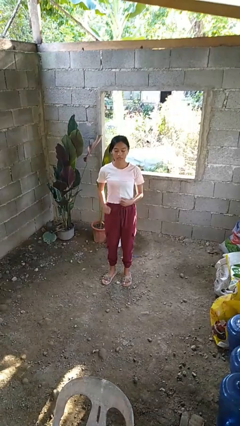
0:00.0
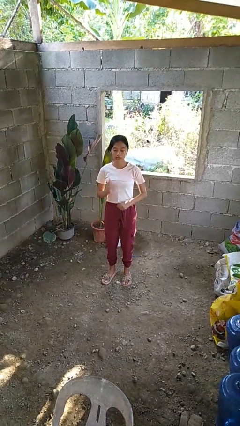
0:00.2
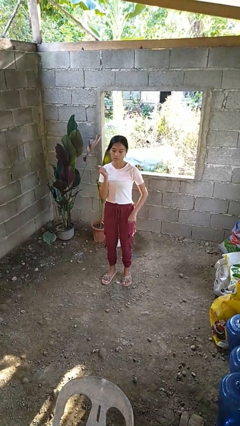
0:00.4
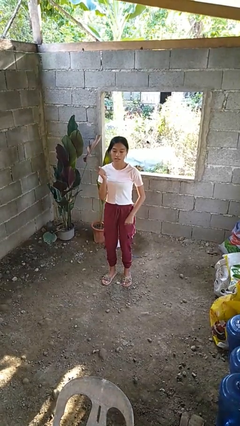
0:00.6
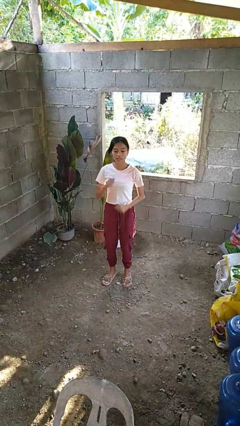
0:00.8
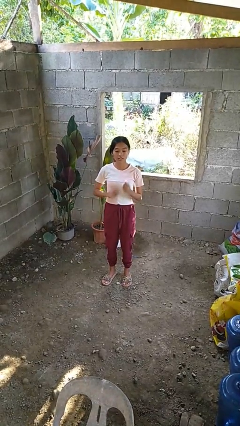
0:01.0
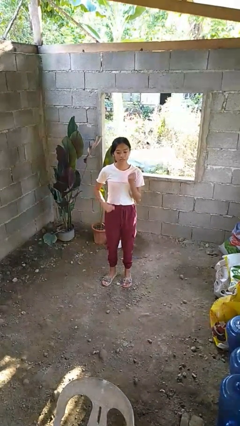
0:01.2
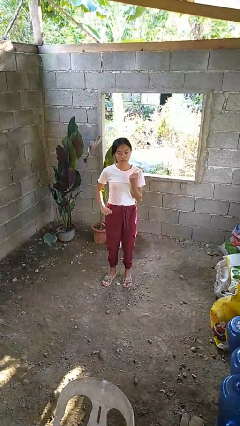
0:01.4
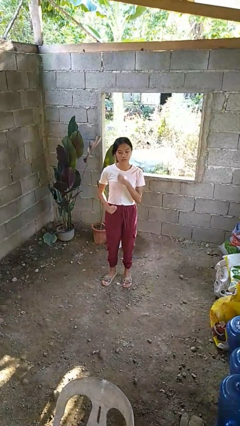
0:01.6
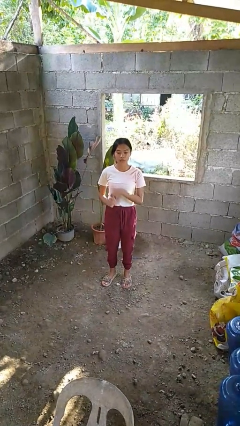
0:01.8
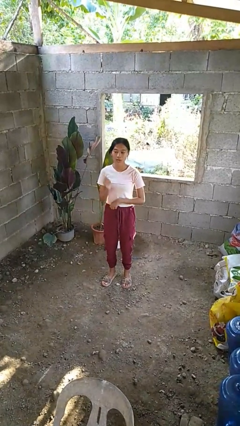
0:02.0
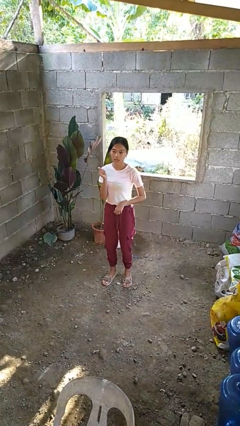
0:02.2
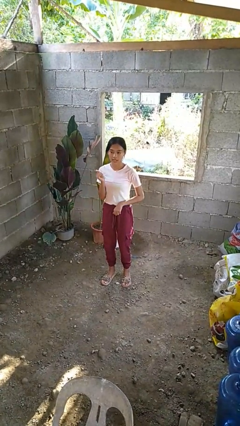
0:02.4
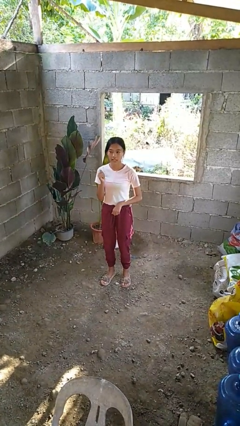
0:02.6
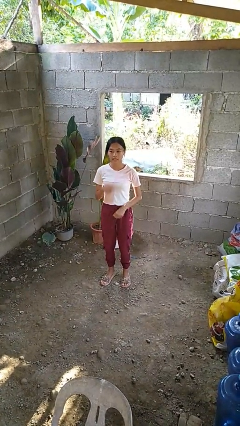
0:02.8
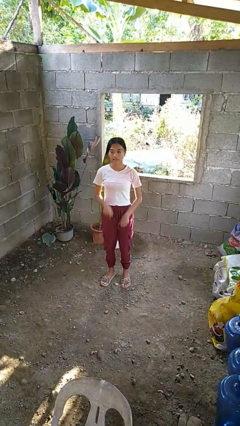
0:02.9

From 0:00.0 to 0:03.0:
person dances in place

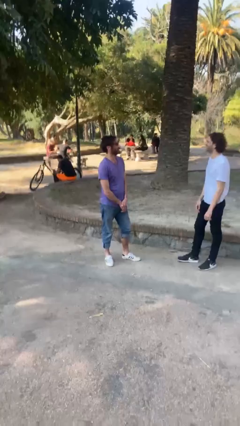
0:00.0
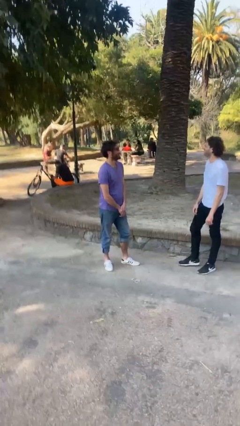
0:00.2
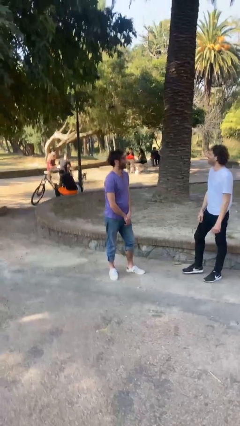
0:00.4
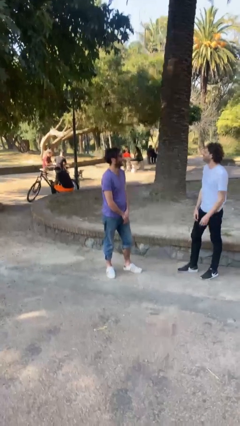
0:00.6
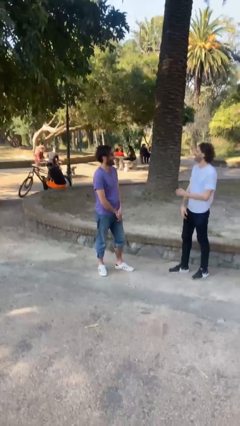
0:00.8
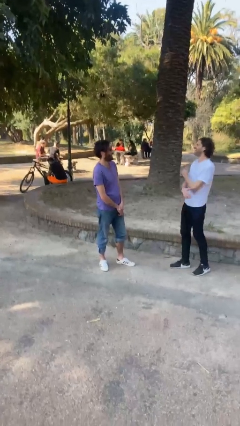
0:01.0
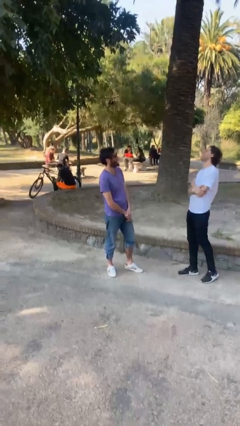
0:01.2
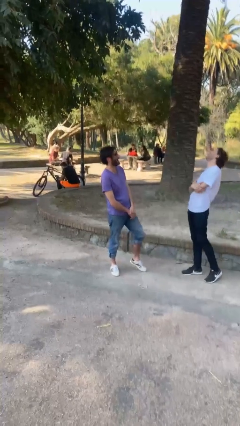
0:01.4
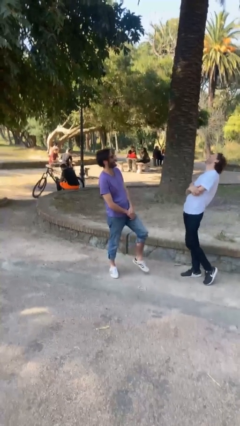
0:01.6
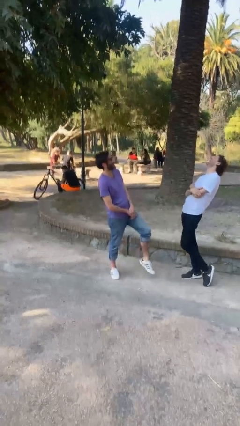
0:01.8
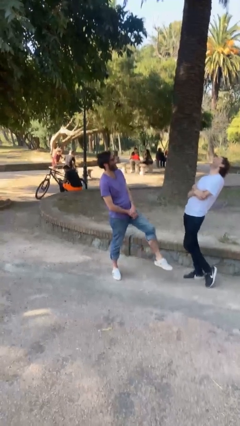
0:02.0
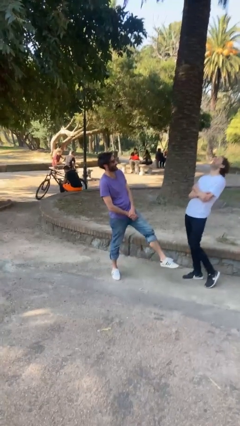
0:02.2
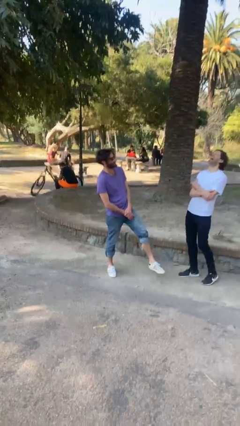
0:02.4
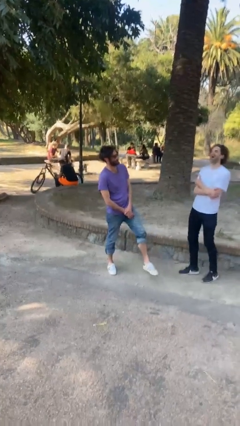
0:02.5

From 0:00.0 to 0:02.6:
person laughs with person

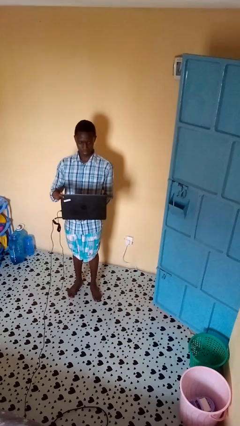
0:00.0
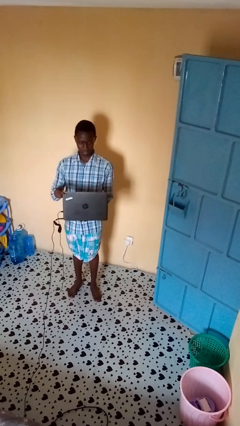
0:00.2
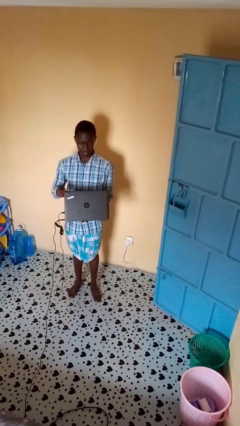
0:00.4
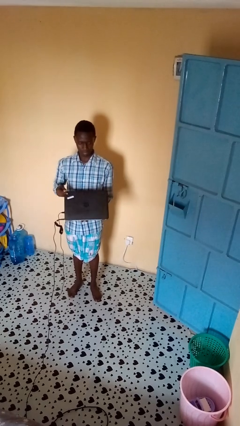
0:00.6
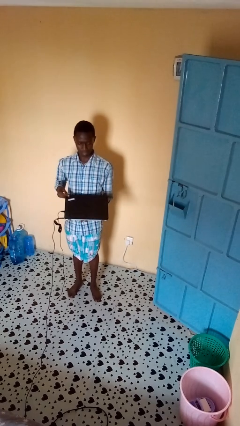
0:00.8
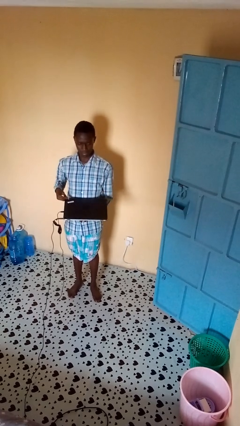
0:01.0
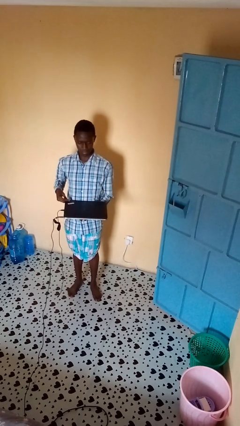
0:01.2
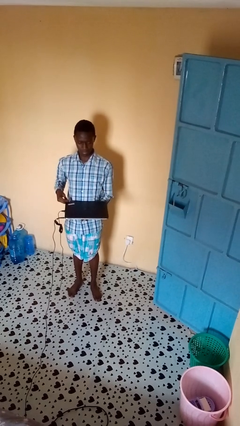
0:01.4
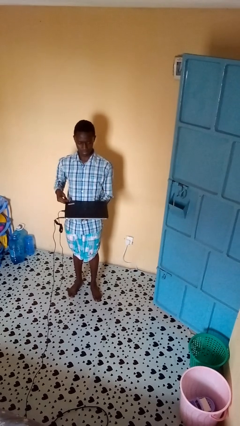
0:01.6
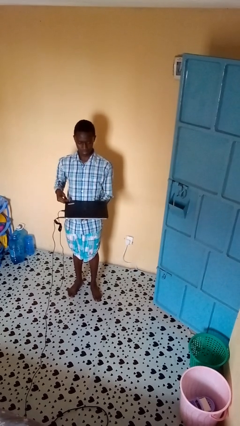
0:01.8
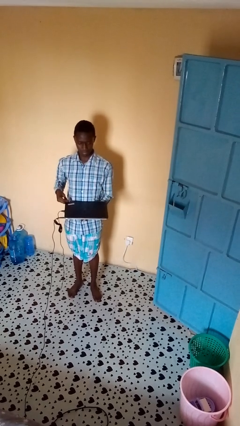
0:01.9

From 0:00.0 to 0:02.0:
person closes laptop

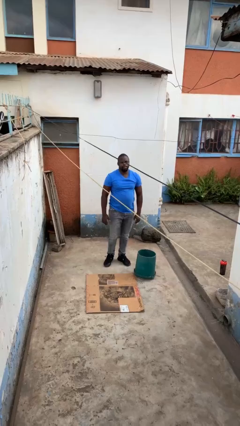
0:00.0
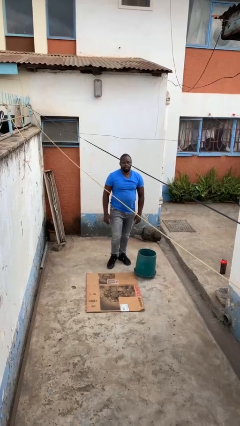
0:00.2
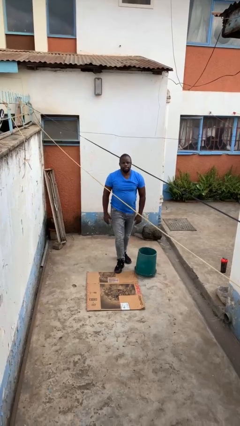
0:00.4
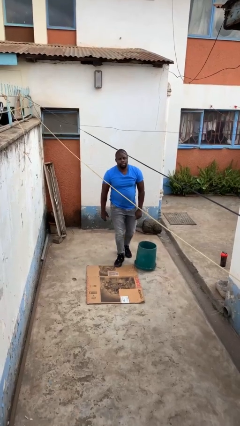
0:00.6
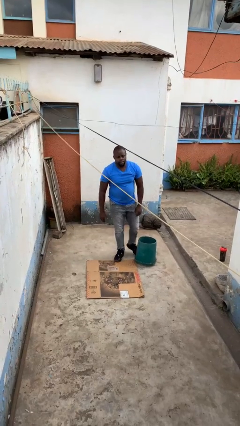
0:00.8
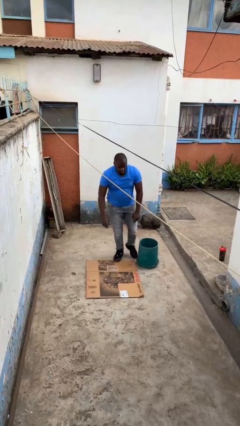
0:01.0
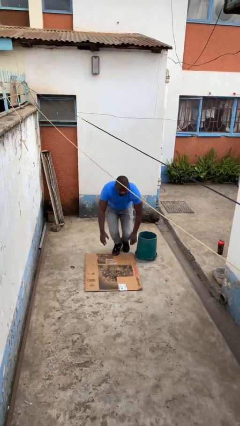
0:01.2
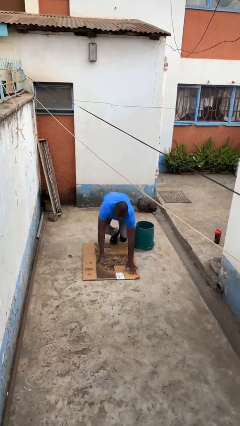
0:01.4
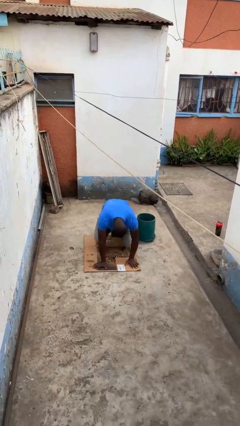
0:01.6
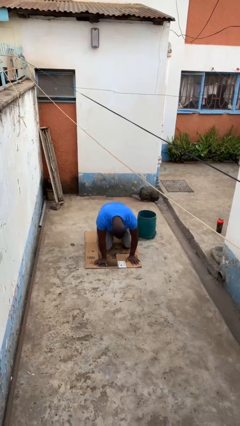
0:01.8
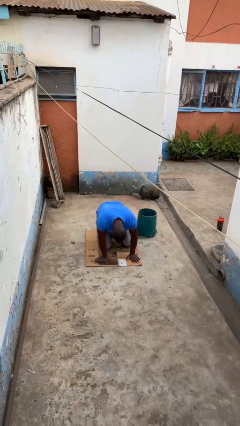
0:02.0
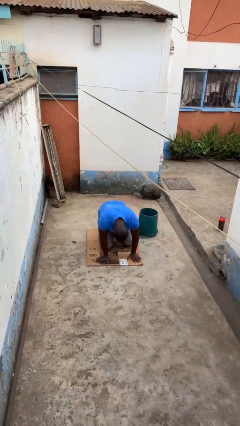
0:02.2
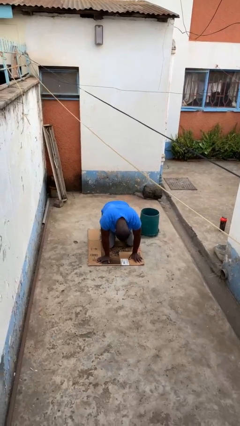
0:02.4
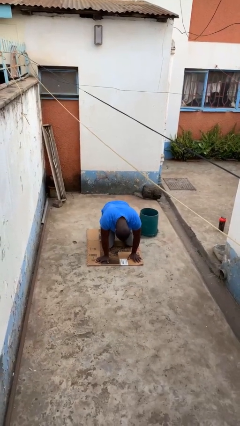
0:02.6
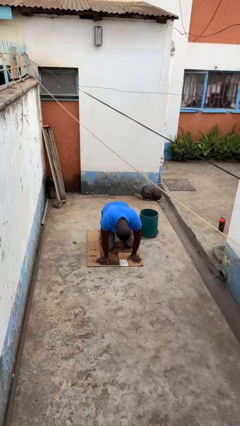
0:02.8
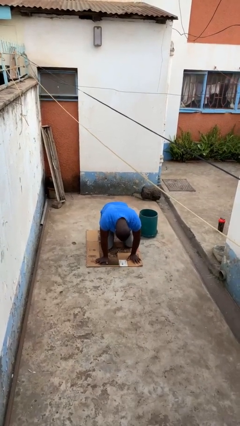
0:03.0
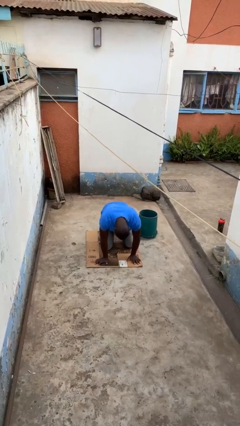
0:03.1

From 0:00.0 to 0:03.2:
person trips on object on floor

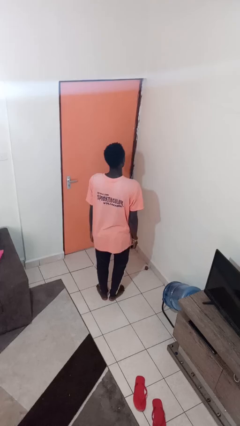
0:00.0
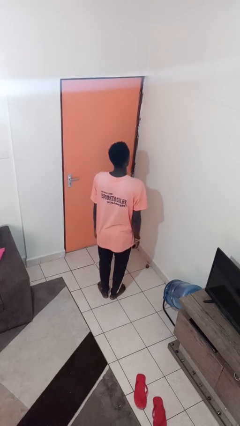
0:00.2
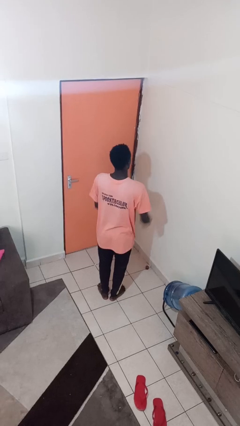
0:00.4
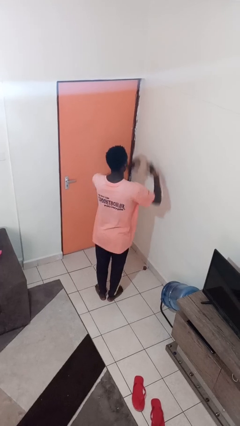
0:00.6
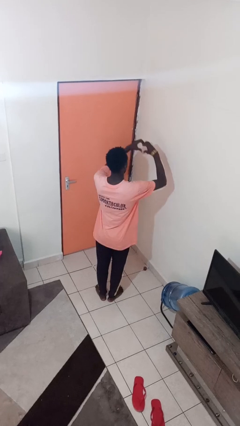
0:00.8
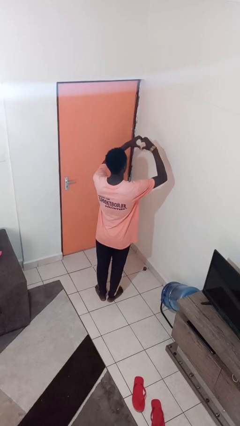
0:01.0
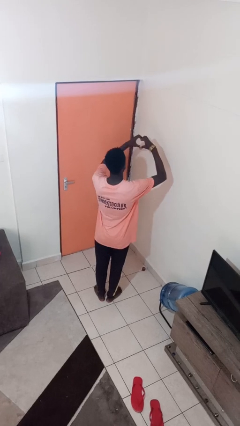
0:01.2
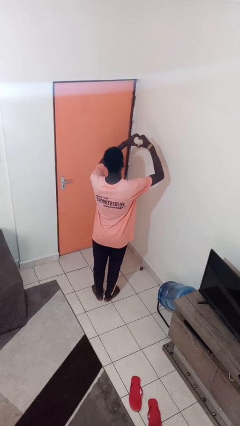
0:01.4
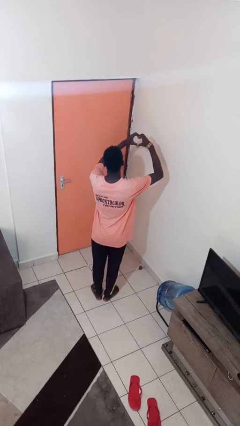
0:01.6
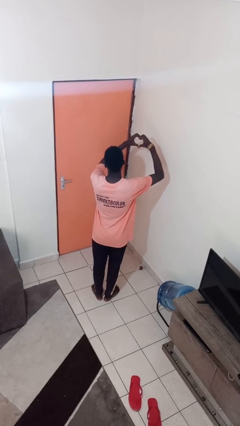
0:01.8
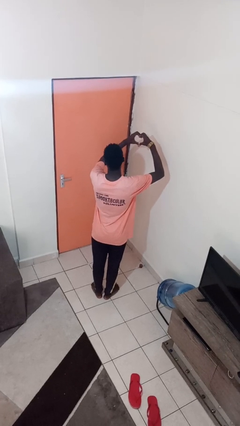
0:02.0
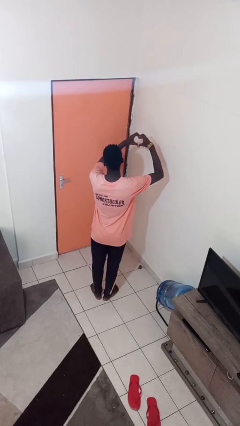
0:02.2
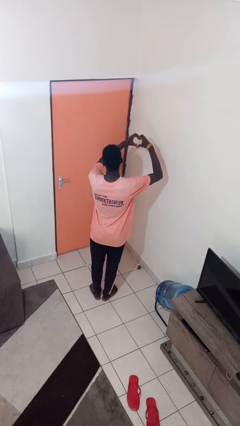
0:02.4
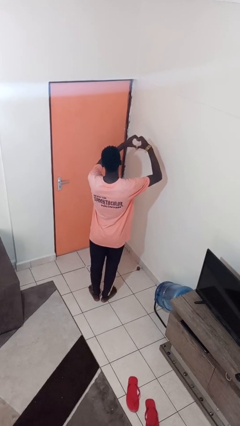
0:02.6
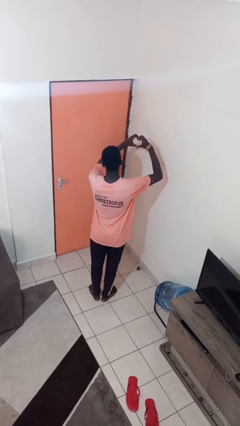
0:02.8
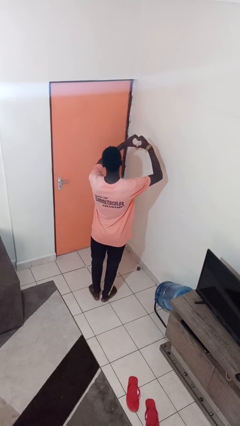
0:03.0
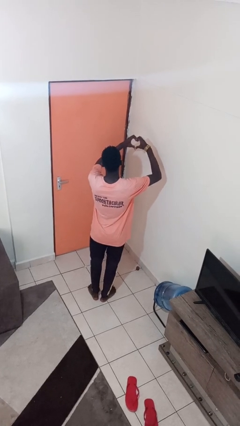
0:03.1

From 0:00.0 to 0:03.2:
person gestures heart

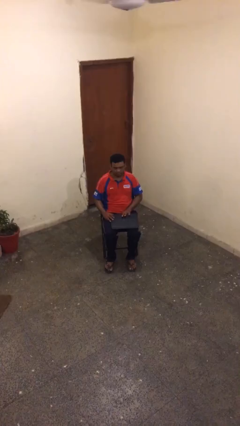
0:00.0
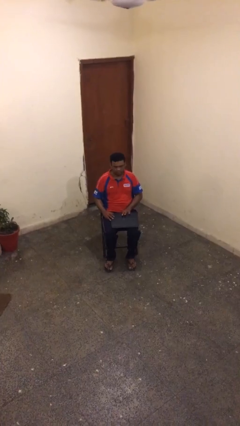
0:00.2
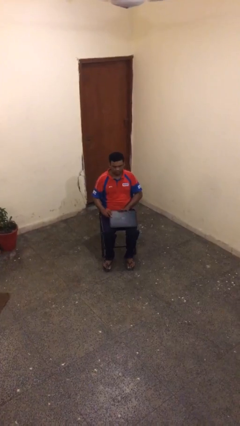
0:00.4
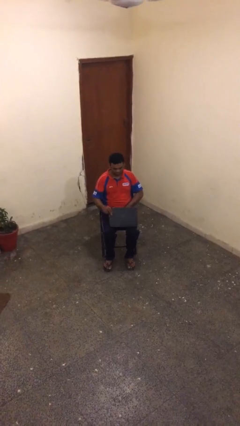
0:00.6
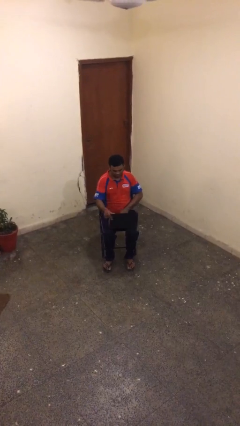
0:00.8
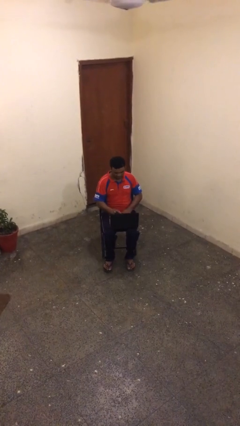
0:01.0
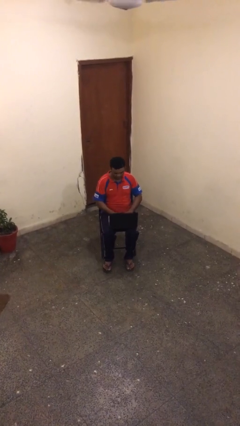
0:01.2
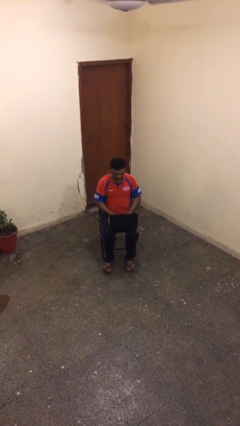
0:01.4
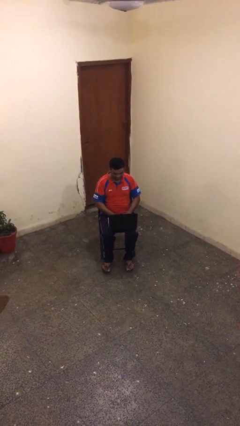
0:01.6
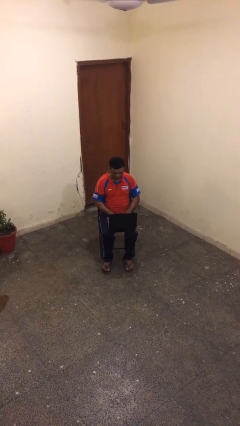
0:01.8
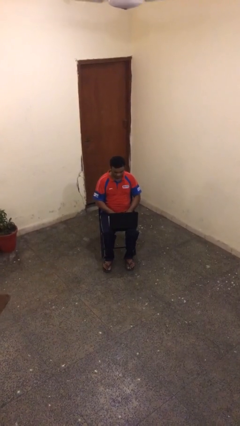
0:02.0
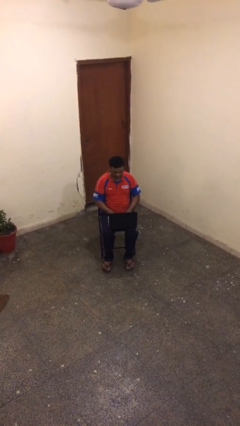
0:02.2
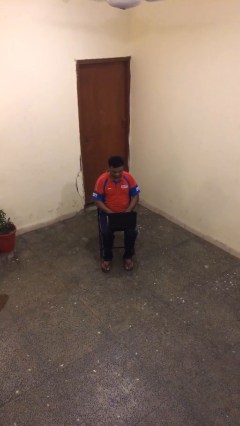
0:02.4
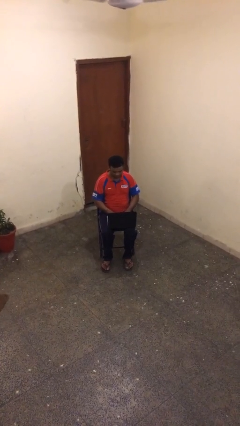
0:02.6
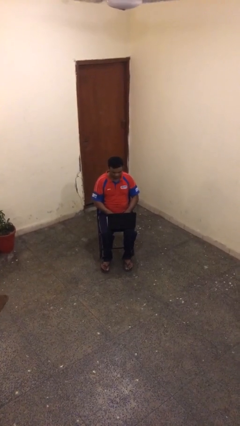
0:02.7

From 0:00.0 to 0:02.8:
person interacts with laptop

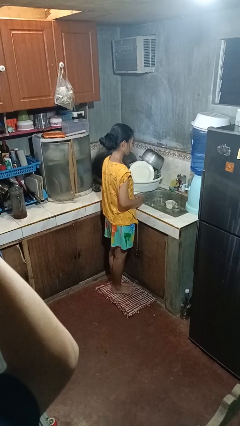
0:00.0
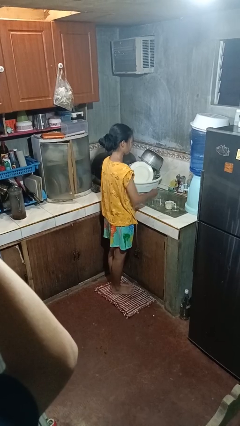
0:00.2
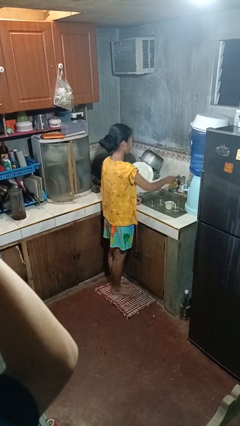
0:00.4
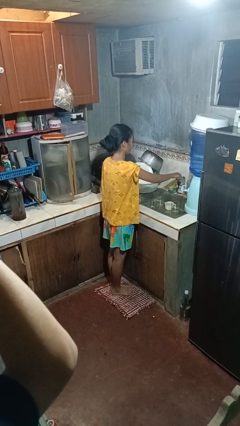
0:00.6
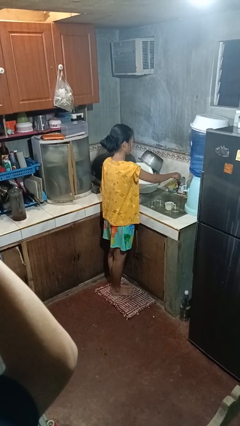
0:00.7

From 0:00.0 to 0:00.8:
person turns off faucet
